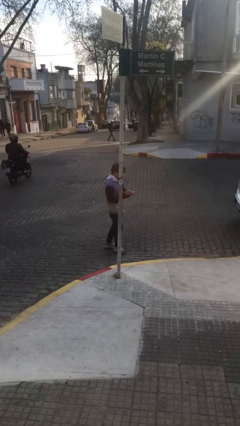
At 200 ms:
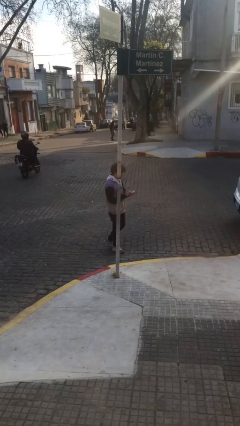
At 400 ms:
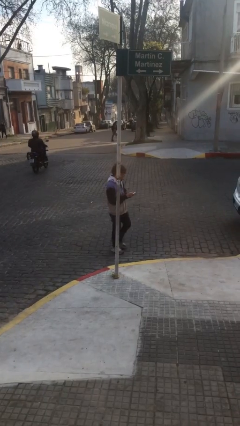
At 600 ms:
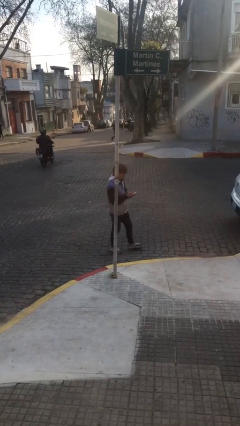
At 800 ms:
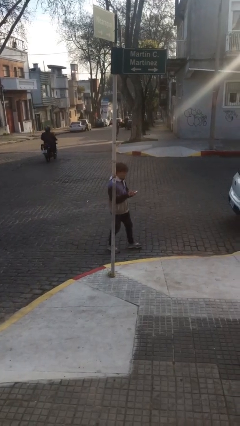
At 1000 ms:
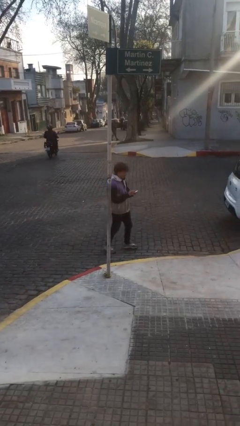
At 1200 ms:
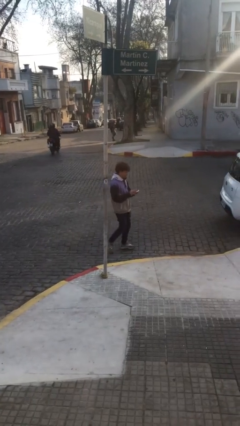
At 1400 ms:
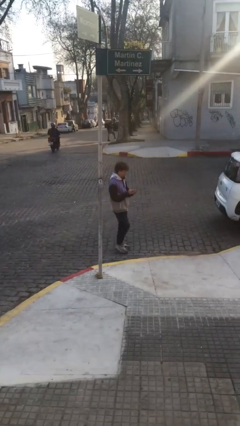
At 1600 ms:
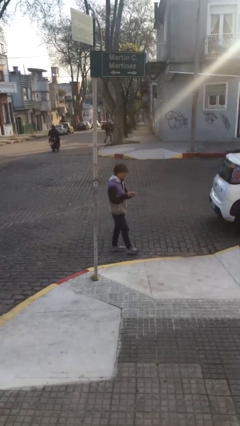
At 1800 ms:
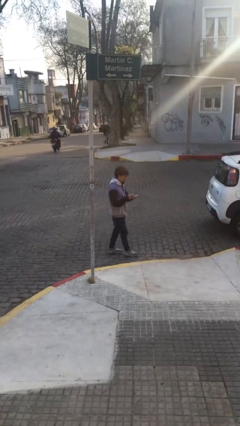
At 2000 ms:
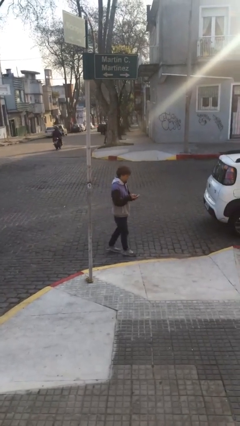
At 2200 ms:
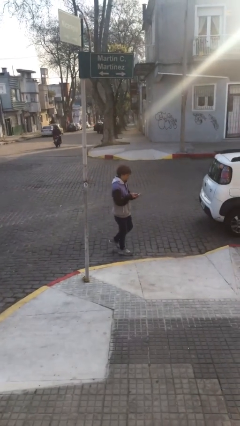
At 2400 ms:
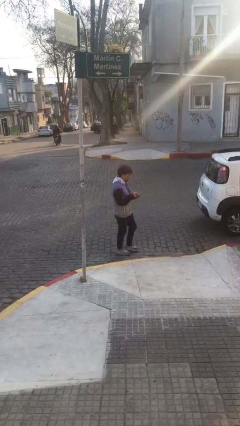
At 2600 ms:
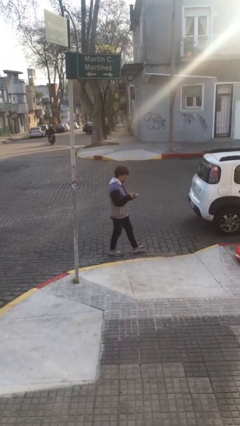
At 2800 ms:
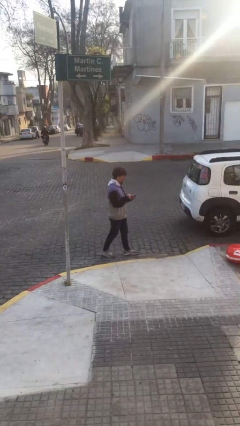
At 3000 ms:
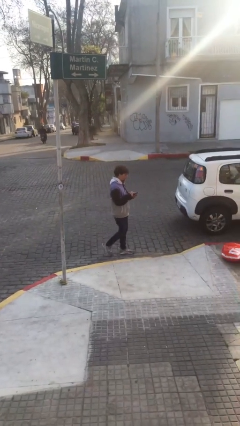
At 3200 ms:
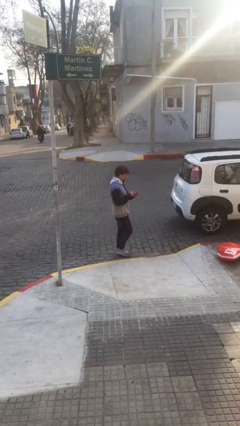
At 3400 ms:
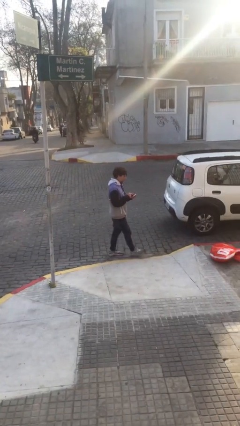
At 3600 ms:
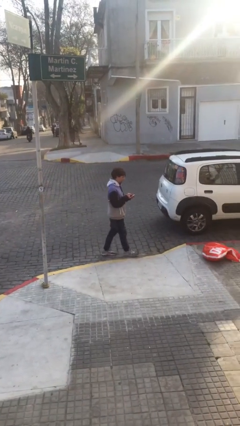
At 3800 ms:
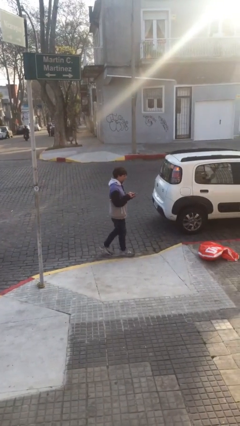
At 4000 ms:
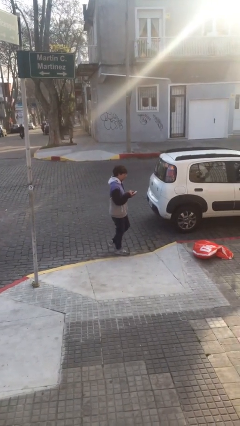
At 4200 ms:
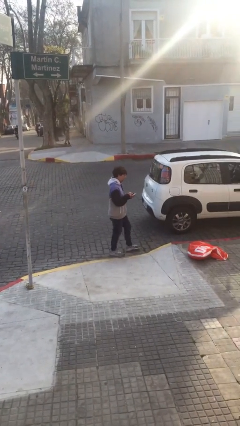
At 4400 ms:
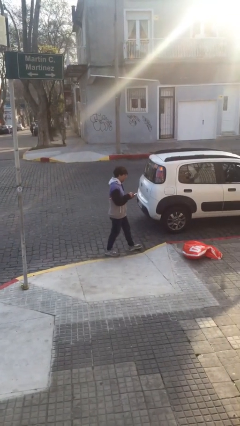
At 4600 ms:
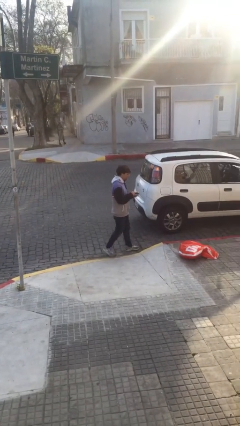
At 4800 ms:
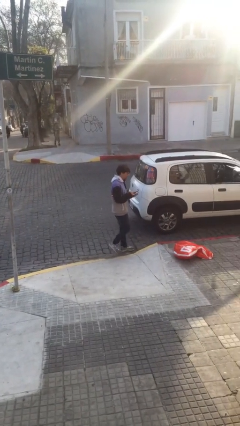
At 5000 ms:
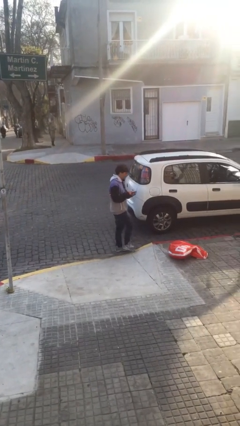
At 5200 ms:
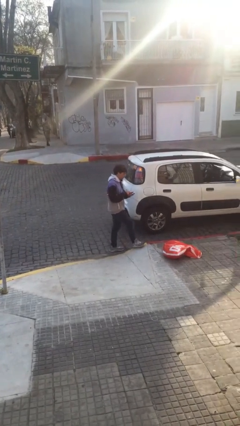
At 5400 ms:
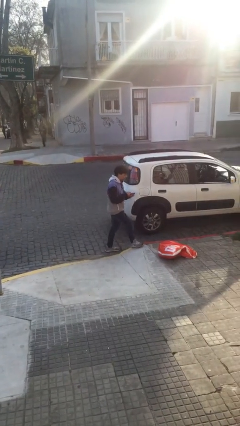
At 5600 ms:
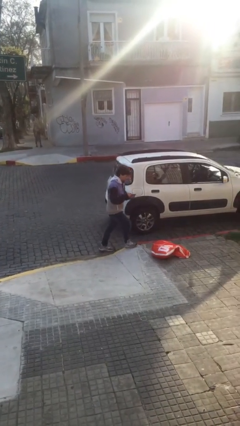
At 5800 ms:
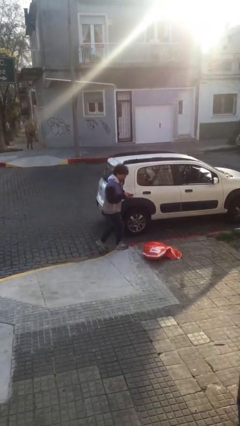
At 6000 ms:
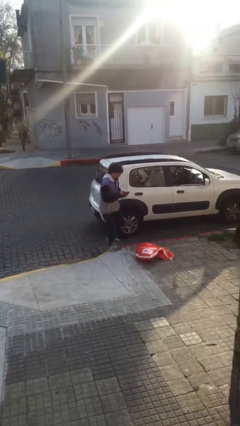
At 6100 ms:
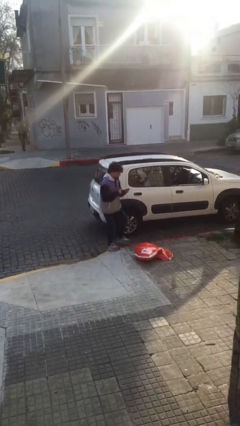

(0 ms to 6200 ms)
person texts on phone

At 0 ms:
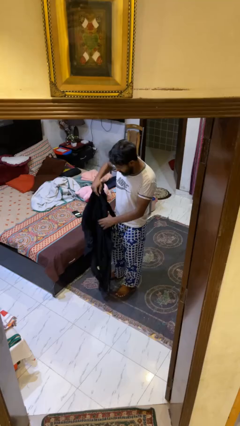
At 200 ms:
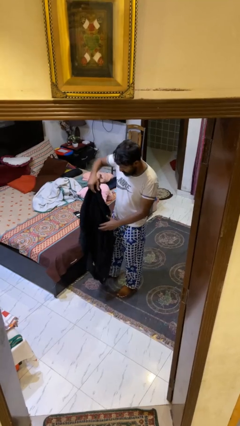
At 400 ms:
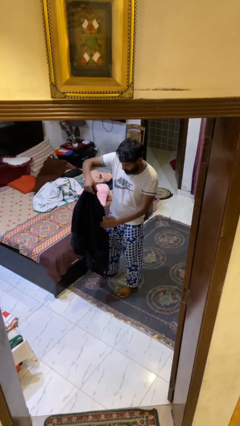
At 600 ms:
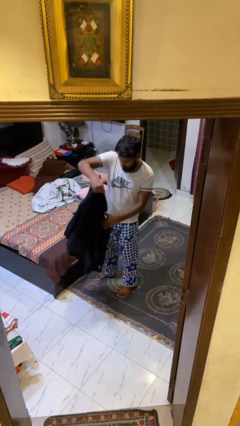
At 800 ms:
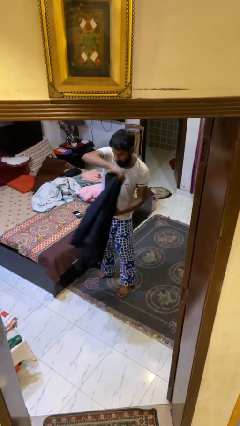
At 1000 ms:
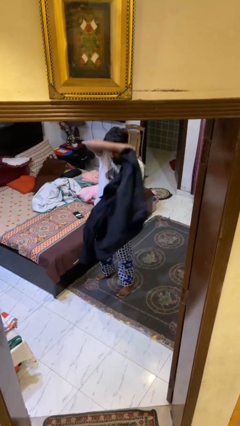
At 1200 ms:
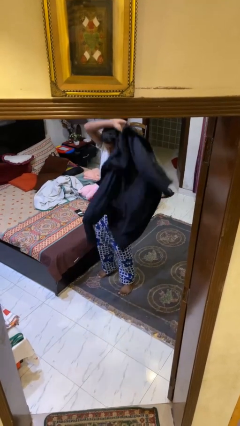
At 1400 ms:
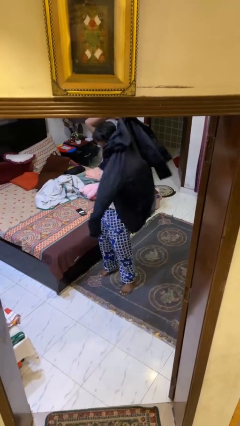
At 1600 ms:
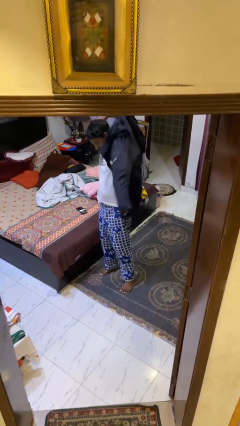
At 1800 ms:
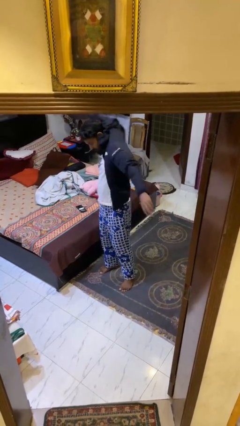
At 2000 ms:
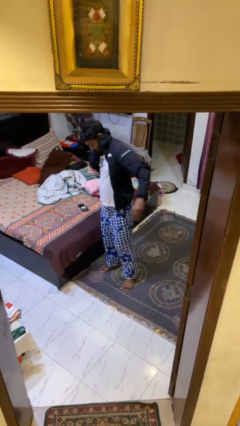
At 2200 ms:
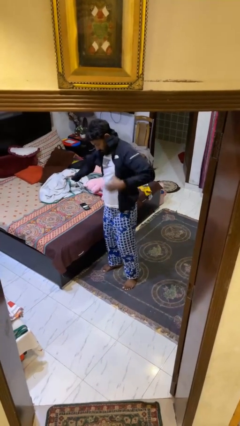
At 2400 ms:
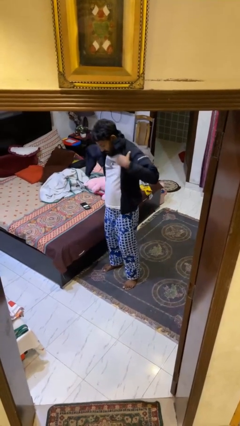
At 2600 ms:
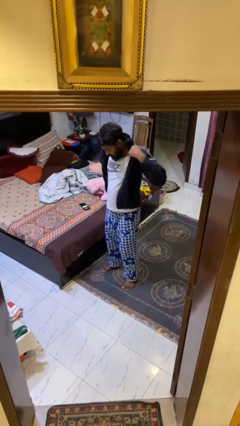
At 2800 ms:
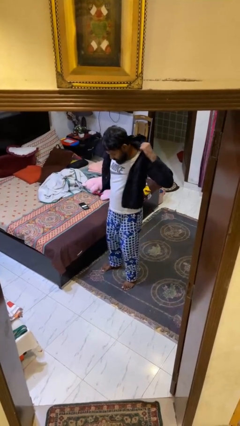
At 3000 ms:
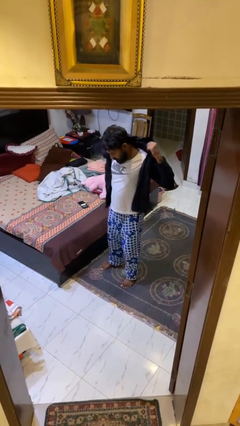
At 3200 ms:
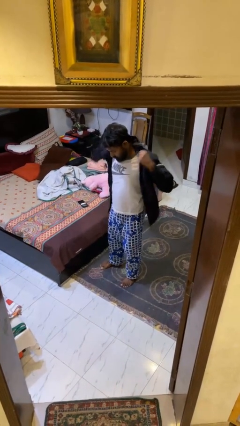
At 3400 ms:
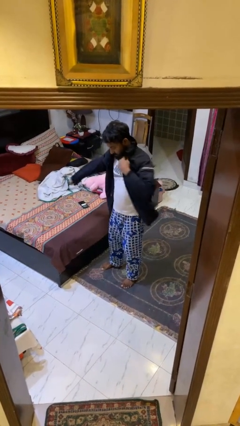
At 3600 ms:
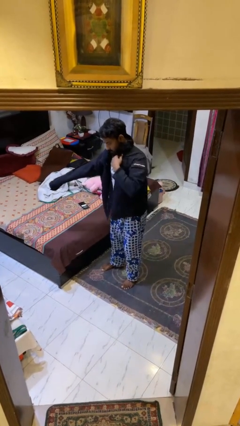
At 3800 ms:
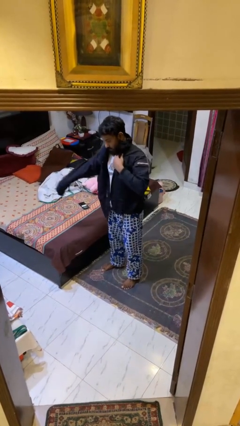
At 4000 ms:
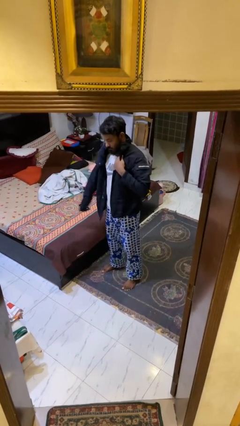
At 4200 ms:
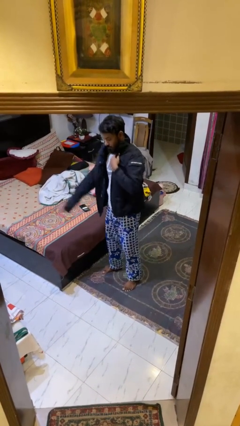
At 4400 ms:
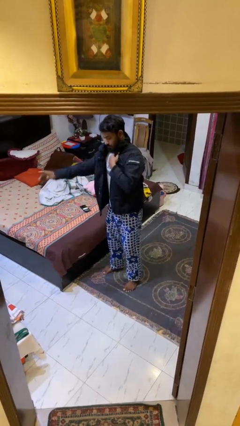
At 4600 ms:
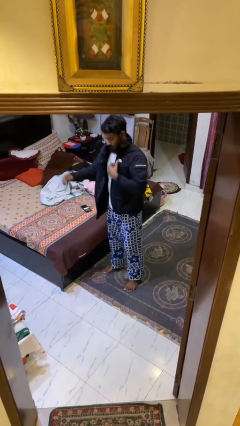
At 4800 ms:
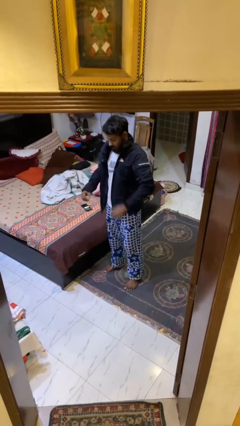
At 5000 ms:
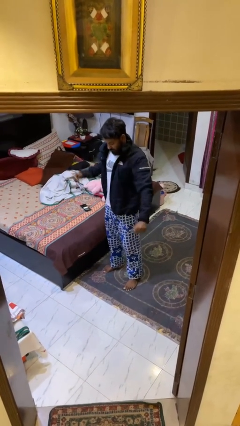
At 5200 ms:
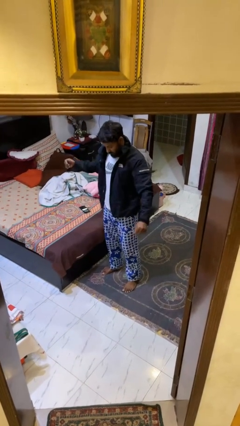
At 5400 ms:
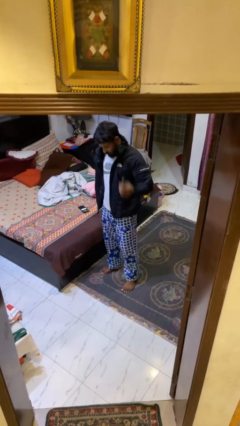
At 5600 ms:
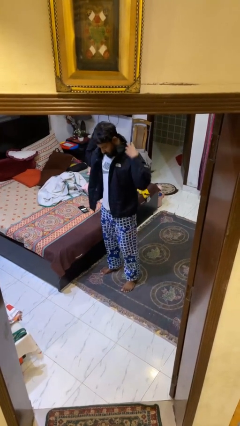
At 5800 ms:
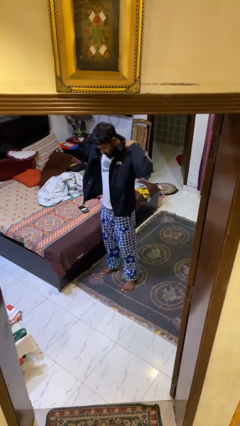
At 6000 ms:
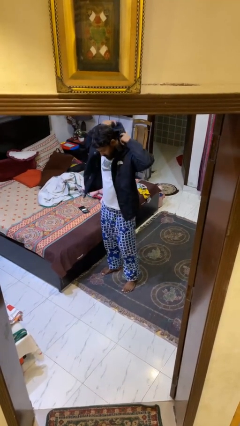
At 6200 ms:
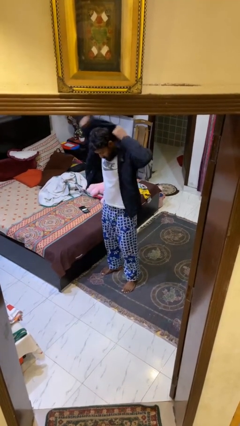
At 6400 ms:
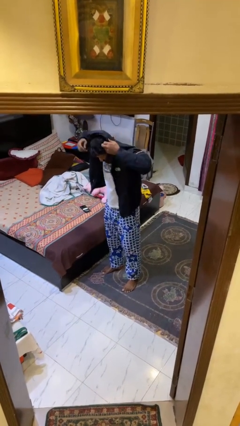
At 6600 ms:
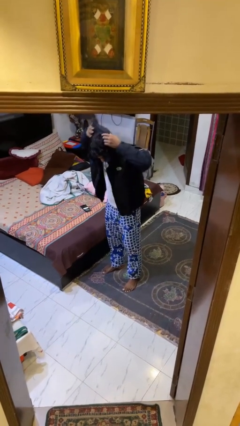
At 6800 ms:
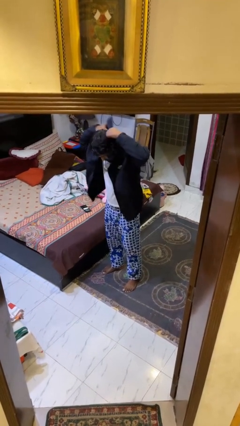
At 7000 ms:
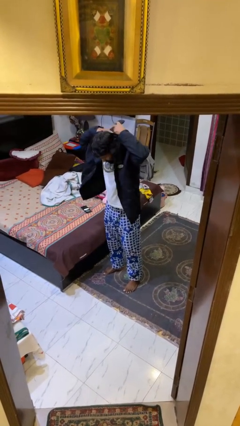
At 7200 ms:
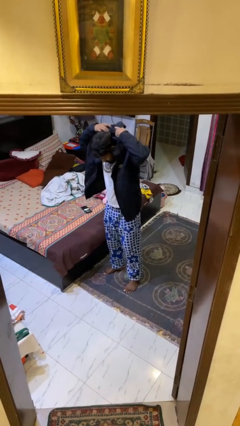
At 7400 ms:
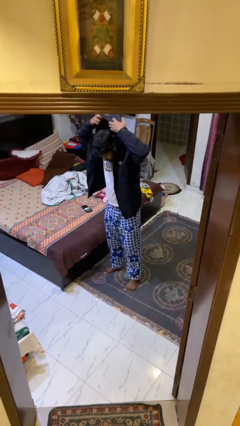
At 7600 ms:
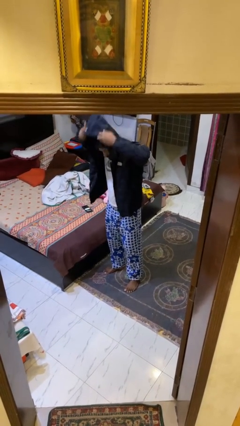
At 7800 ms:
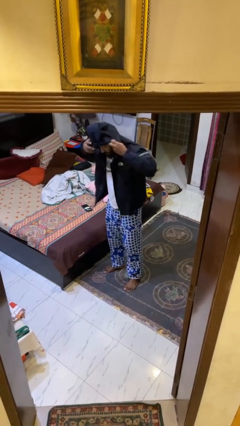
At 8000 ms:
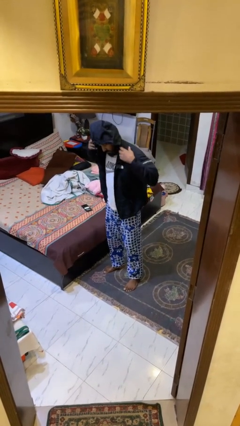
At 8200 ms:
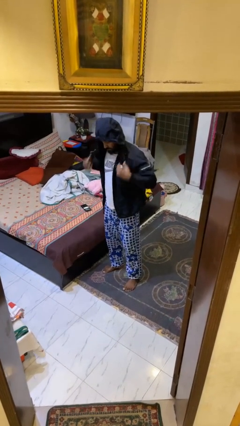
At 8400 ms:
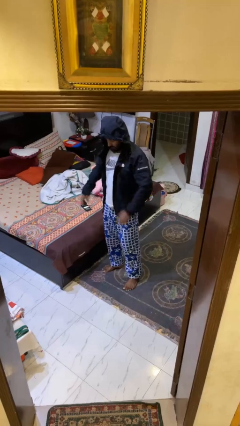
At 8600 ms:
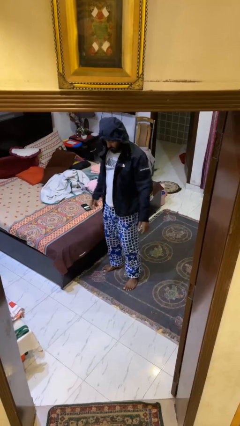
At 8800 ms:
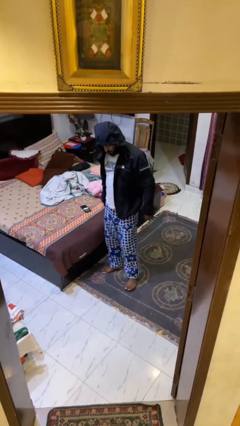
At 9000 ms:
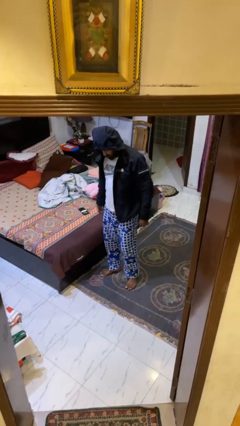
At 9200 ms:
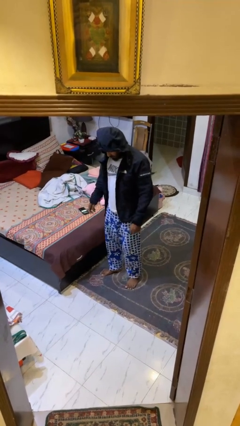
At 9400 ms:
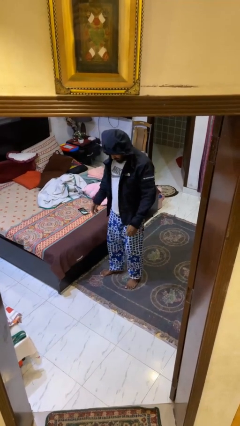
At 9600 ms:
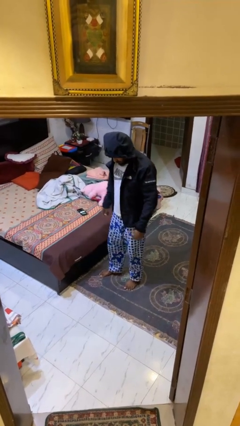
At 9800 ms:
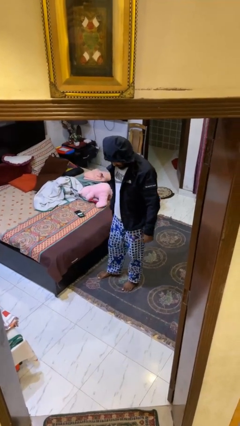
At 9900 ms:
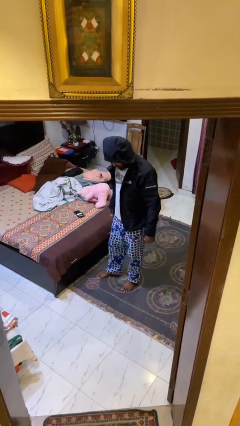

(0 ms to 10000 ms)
person puts on hoodie

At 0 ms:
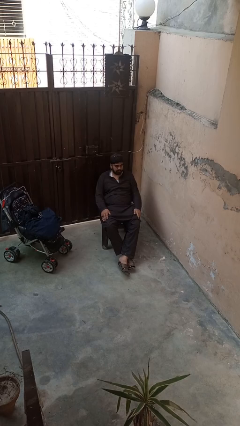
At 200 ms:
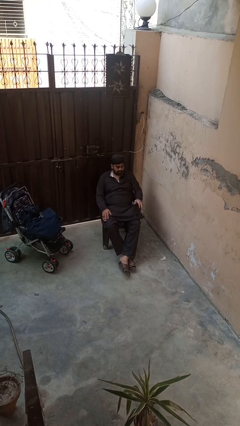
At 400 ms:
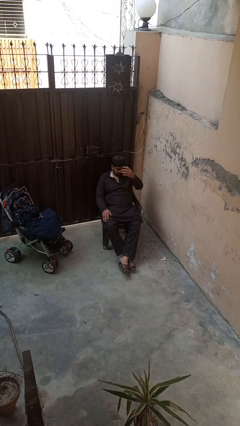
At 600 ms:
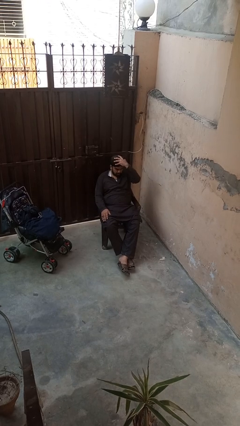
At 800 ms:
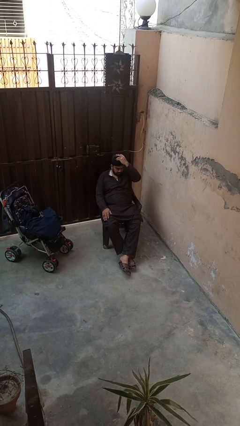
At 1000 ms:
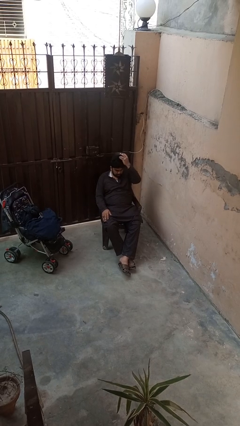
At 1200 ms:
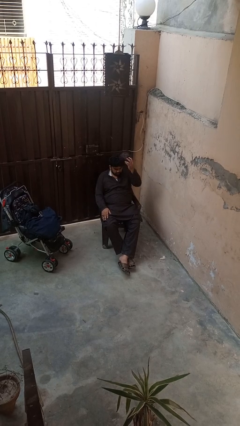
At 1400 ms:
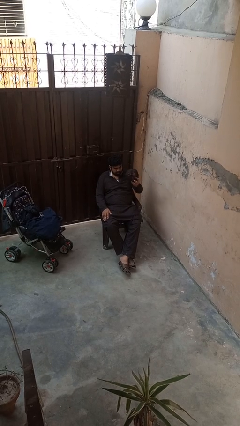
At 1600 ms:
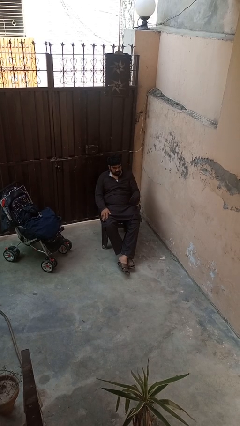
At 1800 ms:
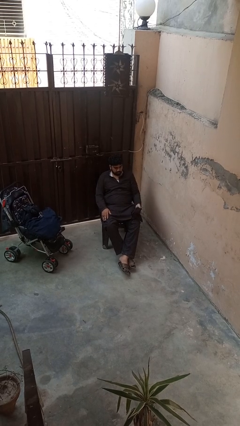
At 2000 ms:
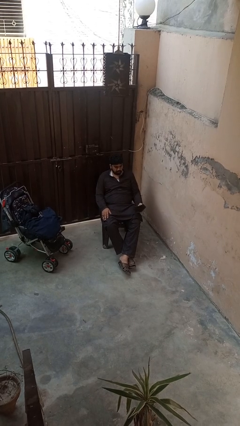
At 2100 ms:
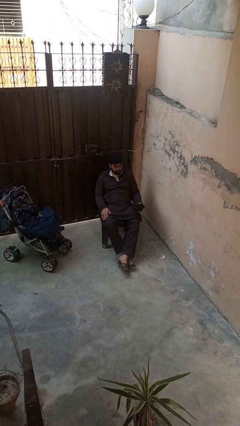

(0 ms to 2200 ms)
person takes off hat
